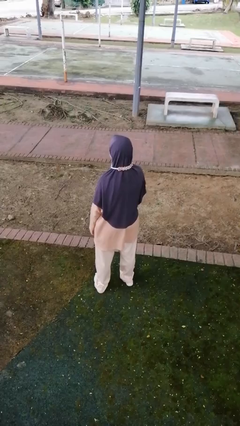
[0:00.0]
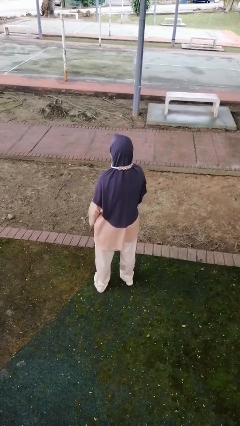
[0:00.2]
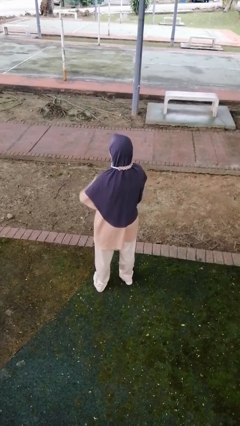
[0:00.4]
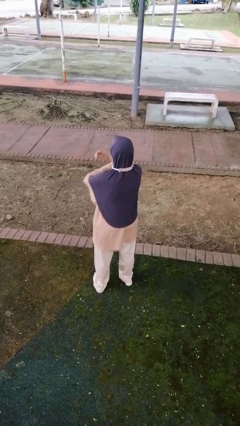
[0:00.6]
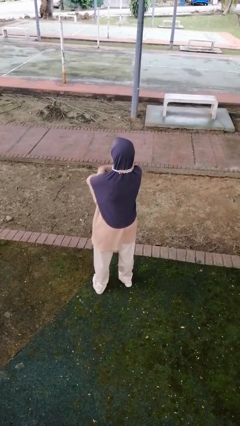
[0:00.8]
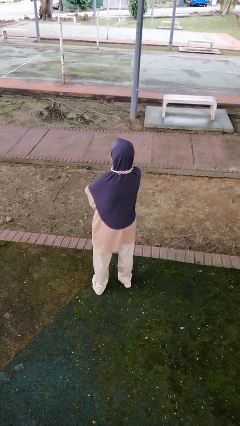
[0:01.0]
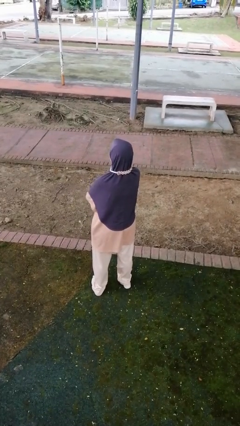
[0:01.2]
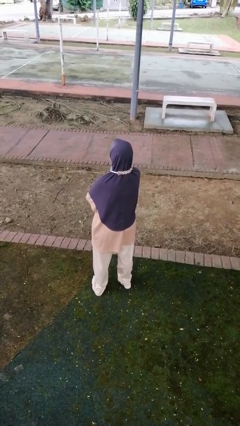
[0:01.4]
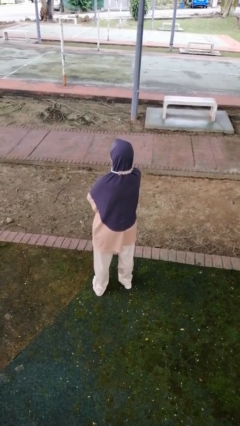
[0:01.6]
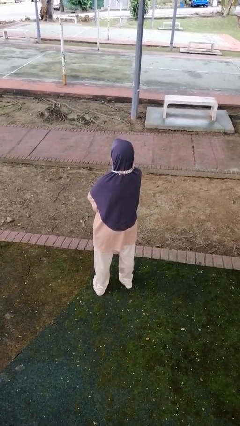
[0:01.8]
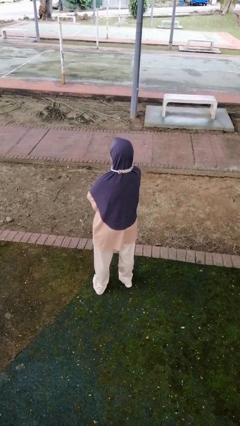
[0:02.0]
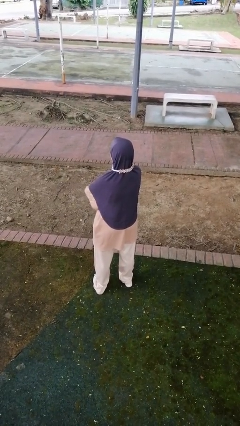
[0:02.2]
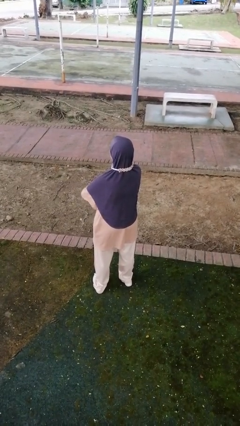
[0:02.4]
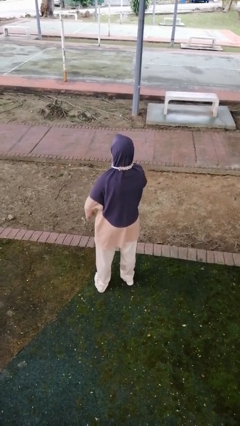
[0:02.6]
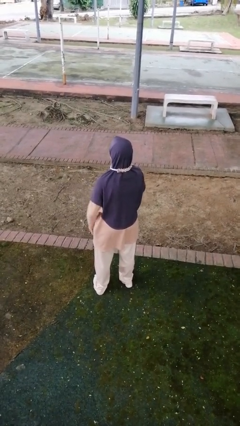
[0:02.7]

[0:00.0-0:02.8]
person crosses arms

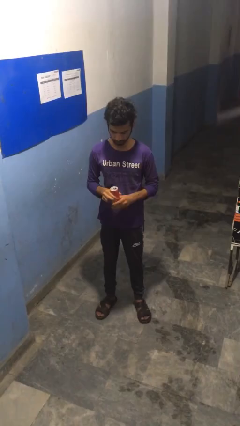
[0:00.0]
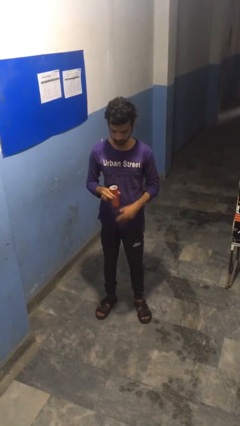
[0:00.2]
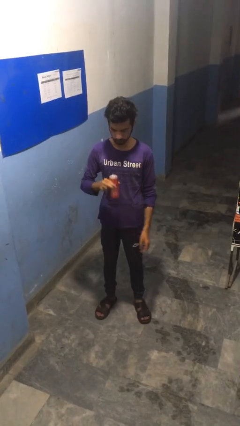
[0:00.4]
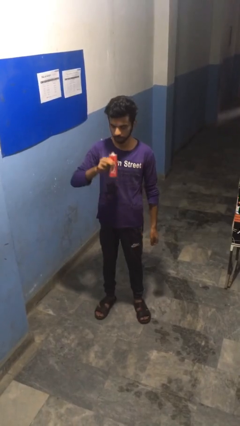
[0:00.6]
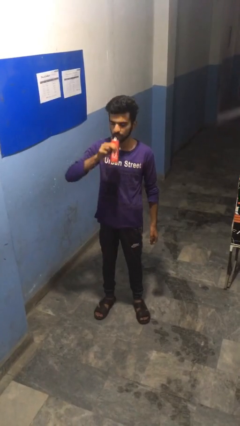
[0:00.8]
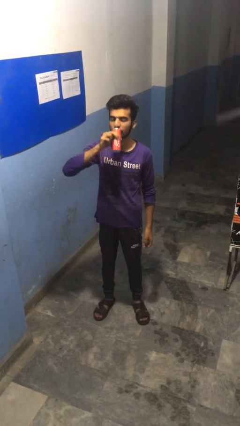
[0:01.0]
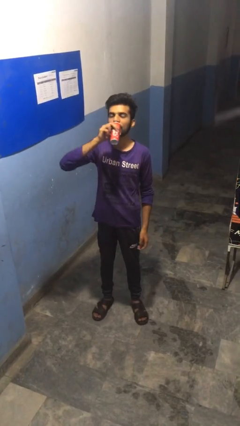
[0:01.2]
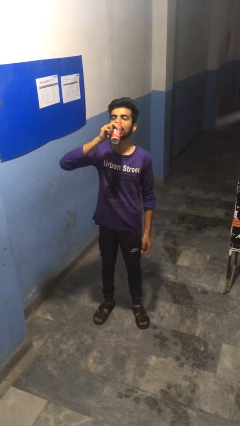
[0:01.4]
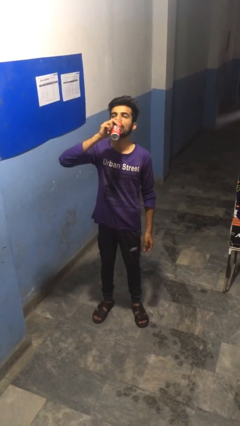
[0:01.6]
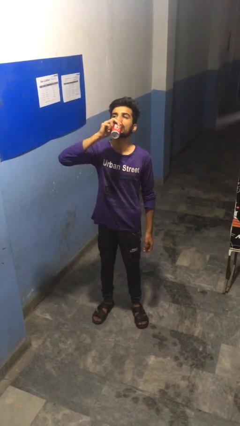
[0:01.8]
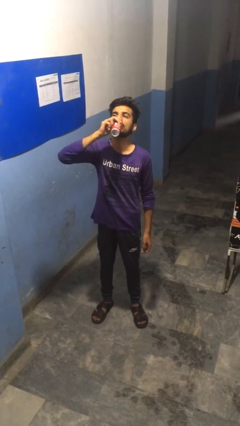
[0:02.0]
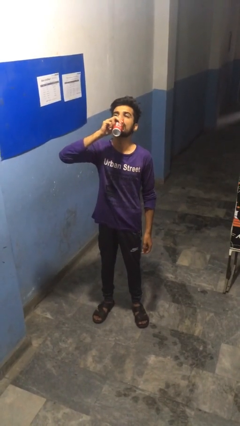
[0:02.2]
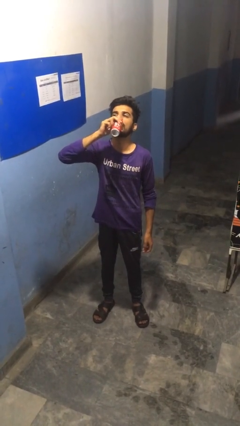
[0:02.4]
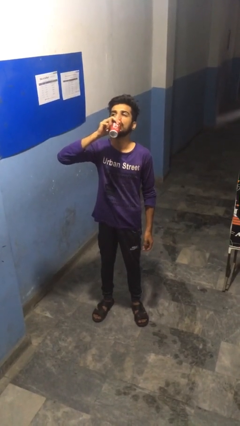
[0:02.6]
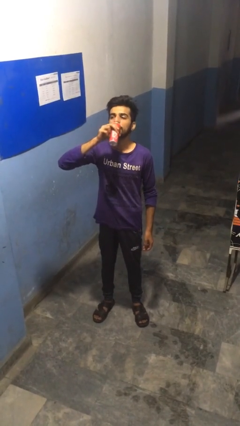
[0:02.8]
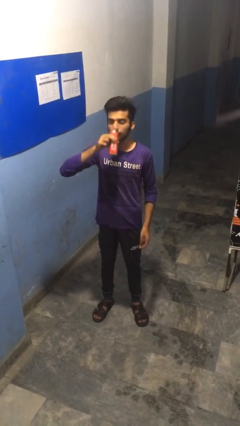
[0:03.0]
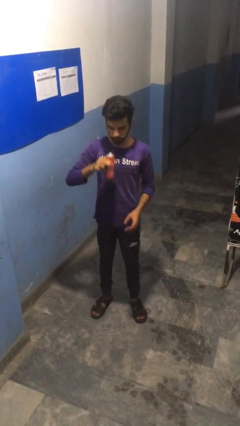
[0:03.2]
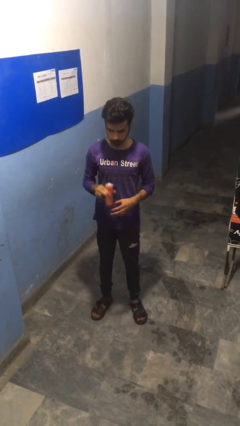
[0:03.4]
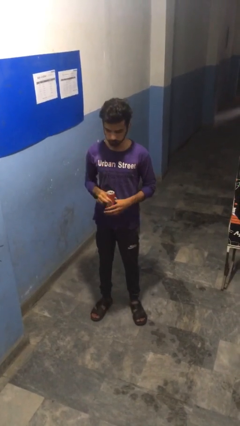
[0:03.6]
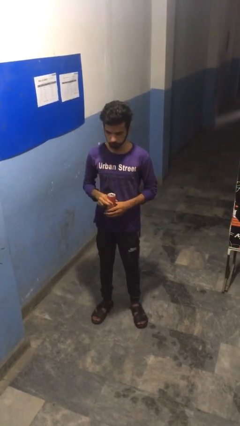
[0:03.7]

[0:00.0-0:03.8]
person drinks from beverage can

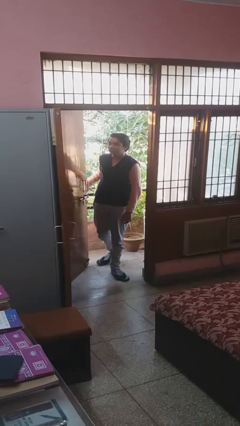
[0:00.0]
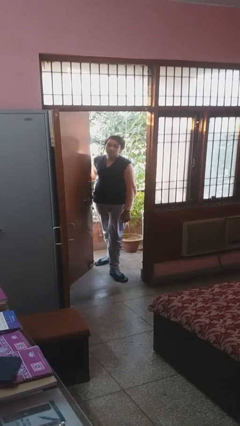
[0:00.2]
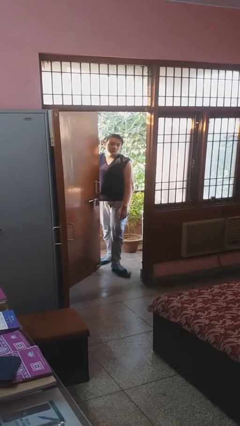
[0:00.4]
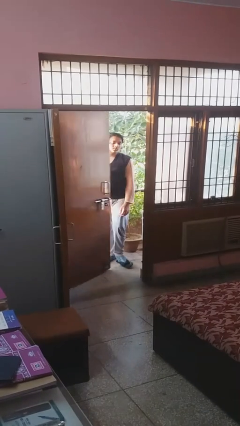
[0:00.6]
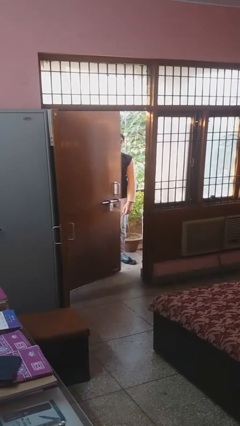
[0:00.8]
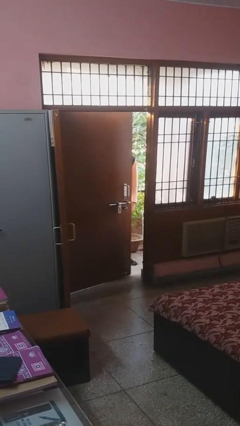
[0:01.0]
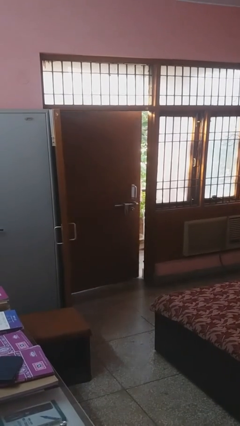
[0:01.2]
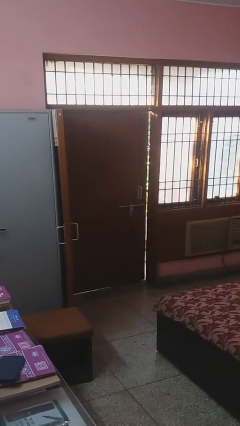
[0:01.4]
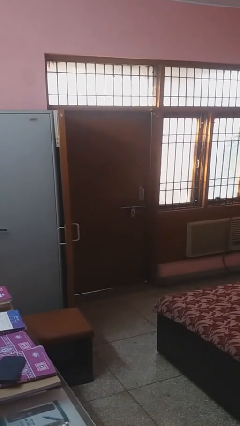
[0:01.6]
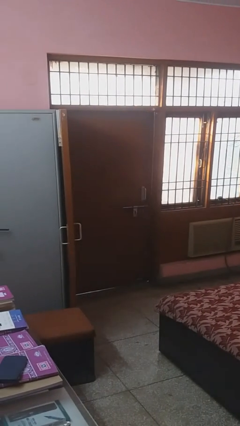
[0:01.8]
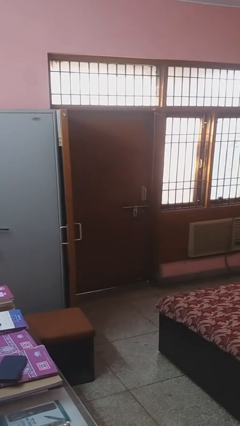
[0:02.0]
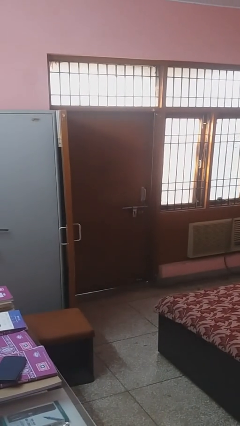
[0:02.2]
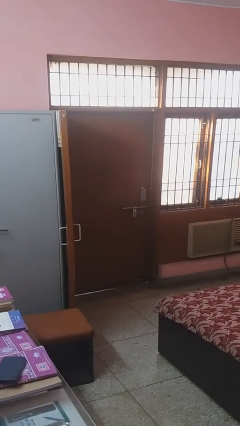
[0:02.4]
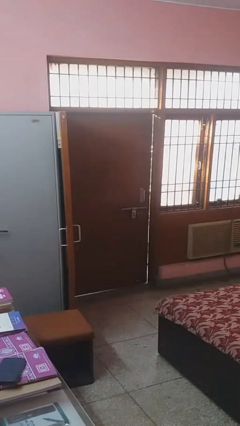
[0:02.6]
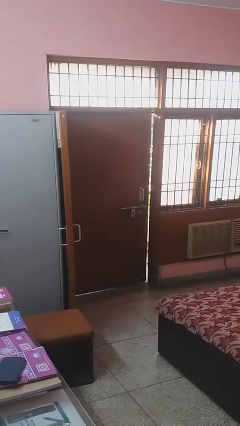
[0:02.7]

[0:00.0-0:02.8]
person closes facility door

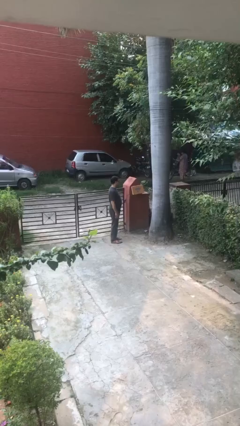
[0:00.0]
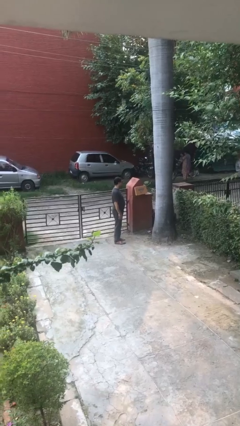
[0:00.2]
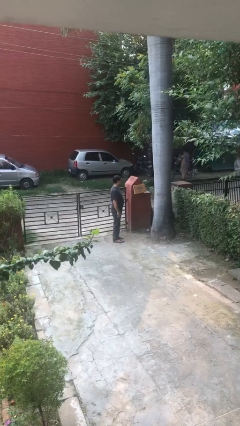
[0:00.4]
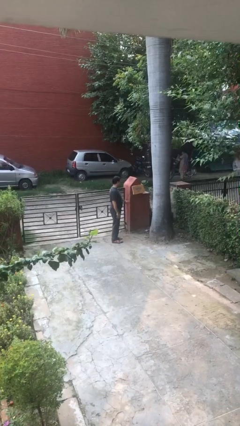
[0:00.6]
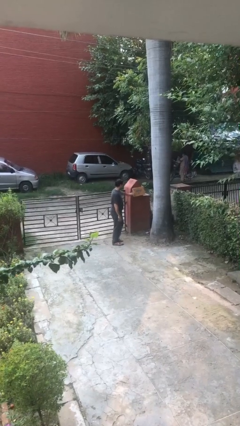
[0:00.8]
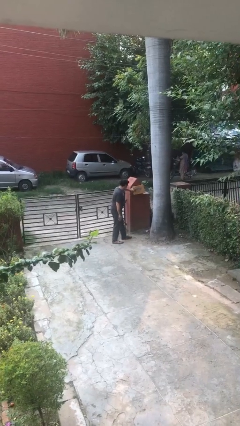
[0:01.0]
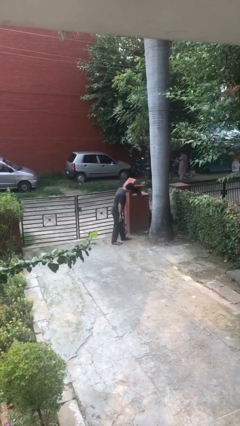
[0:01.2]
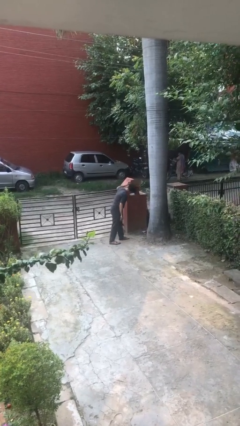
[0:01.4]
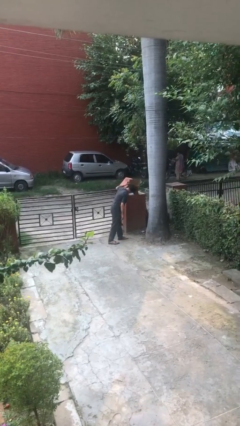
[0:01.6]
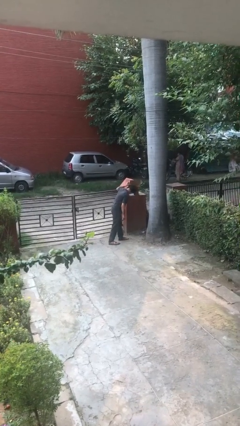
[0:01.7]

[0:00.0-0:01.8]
person opens mailbox

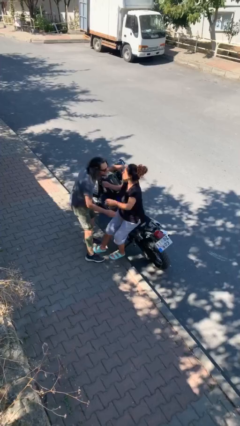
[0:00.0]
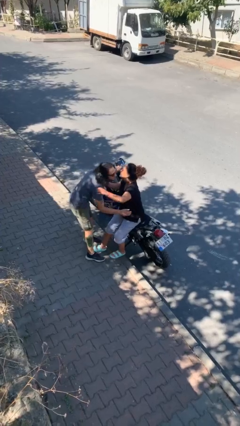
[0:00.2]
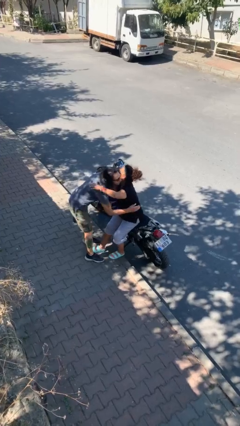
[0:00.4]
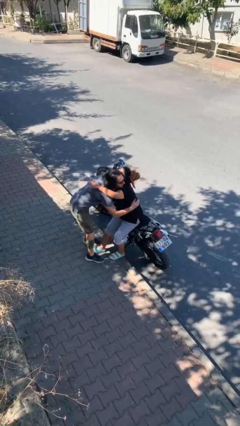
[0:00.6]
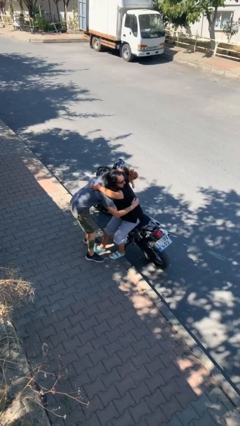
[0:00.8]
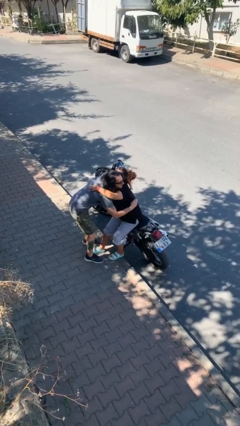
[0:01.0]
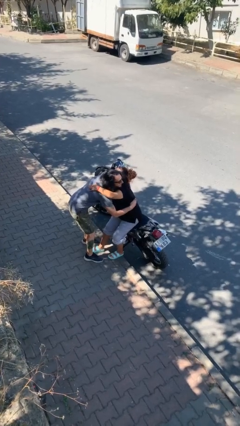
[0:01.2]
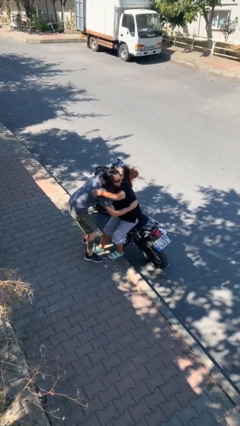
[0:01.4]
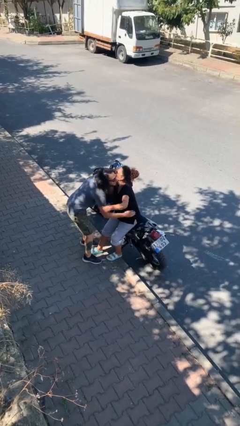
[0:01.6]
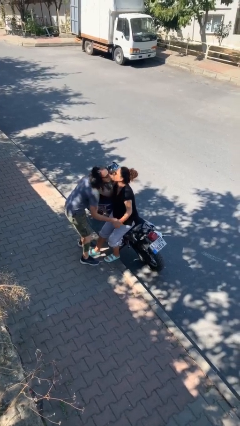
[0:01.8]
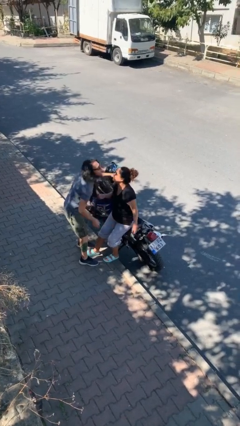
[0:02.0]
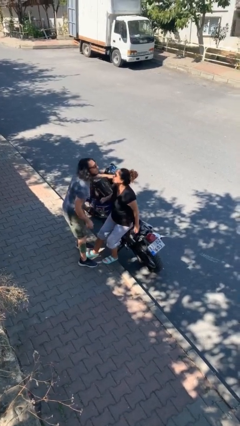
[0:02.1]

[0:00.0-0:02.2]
person embraces person

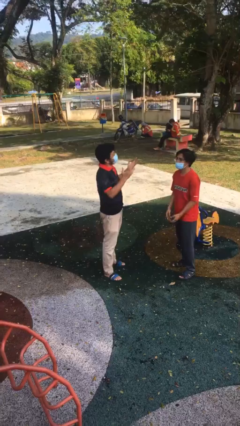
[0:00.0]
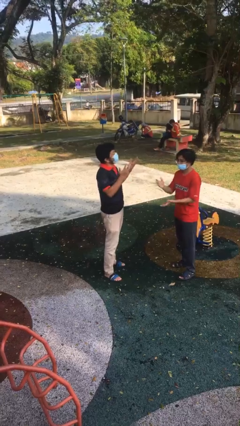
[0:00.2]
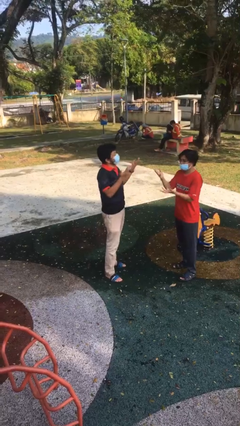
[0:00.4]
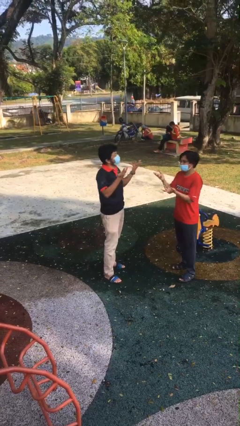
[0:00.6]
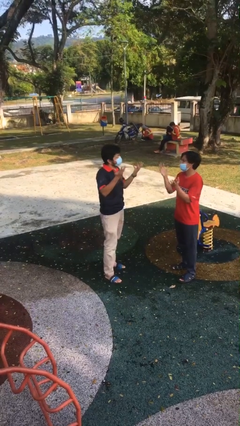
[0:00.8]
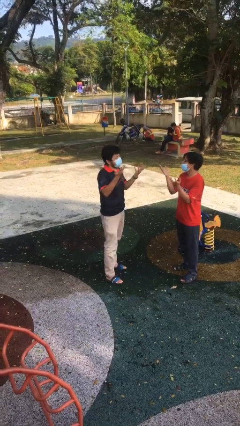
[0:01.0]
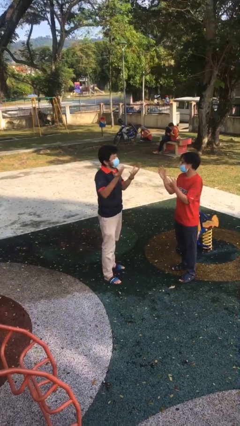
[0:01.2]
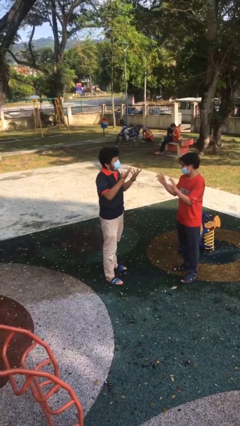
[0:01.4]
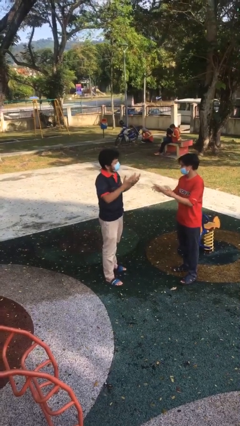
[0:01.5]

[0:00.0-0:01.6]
person talks to person

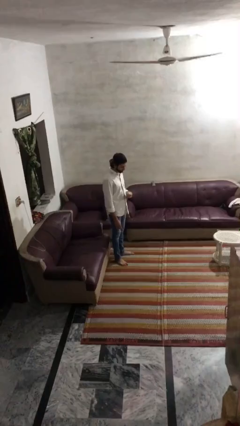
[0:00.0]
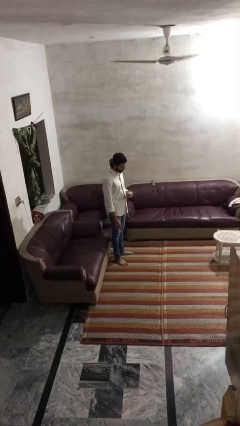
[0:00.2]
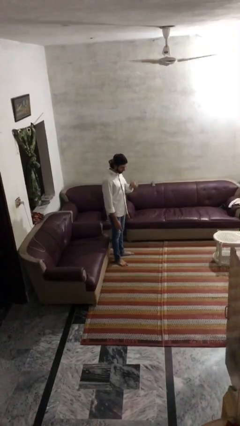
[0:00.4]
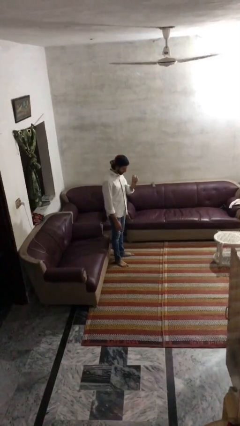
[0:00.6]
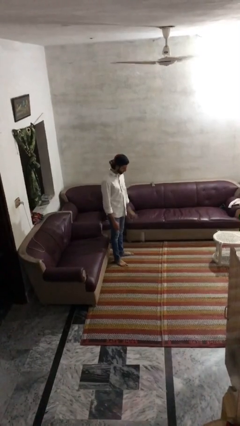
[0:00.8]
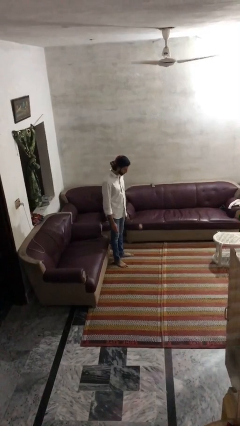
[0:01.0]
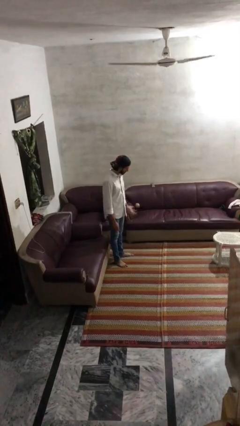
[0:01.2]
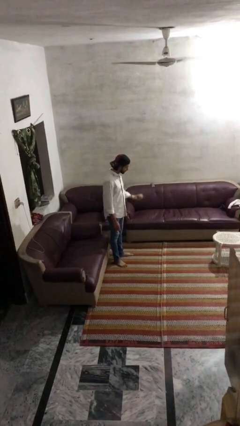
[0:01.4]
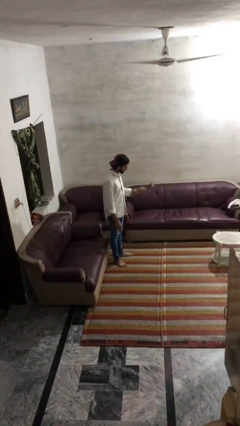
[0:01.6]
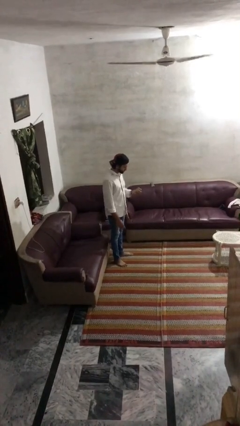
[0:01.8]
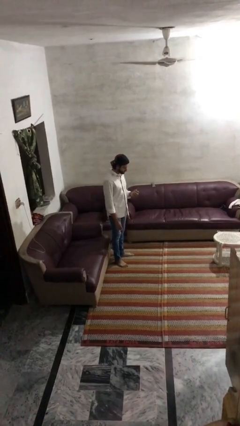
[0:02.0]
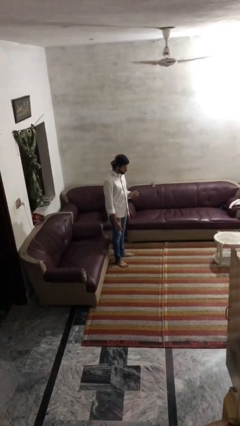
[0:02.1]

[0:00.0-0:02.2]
person bounces ball on floor
